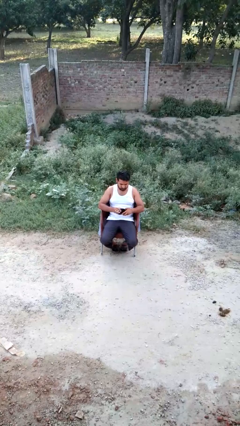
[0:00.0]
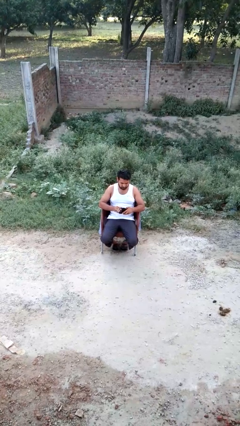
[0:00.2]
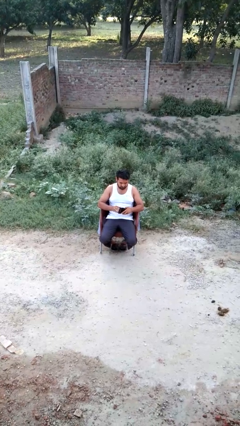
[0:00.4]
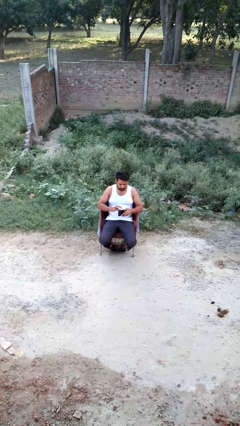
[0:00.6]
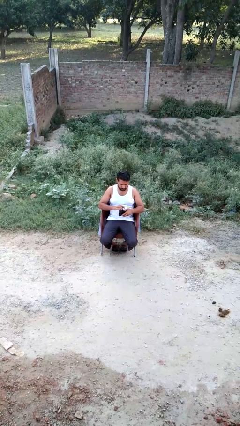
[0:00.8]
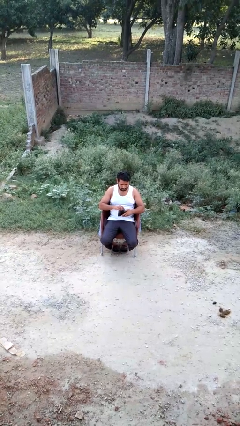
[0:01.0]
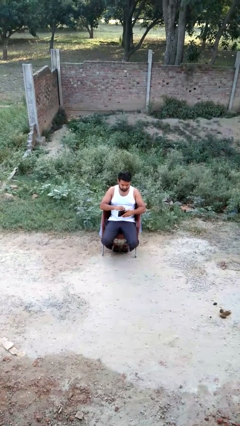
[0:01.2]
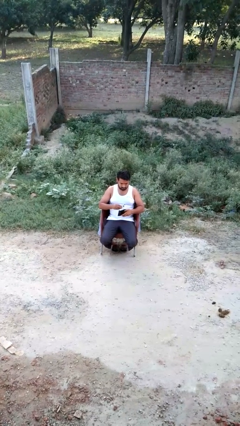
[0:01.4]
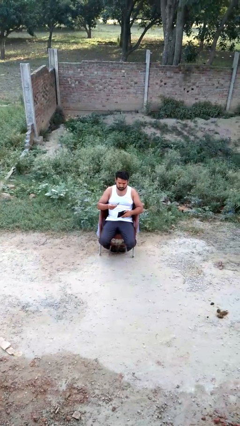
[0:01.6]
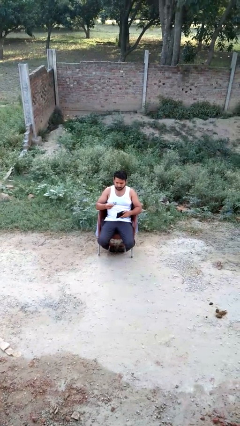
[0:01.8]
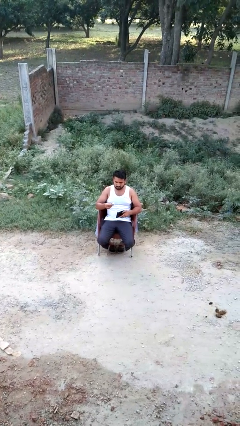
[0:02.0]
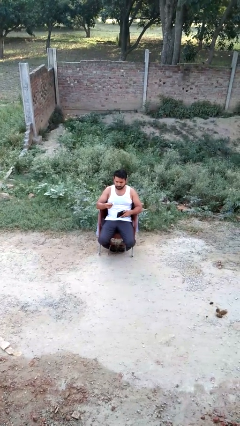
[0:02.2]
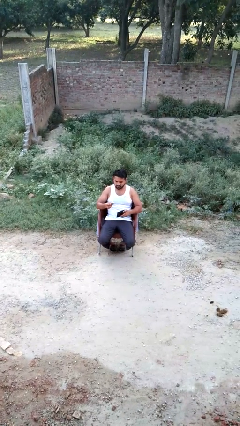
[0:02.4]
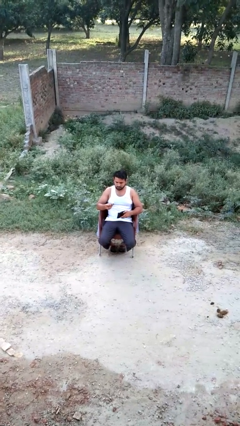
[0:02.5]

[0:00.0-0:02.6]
person takes object from purse

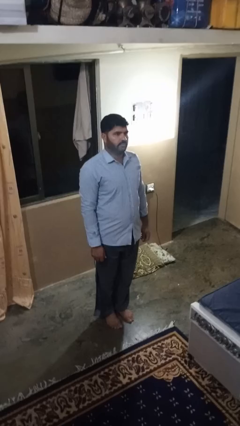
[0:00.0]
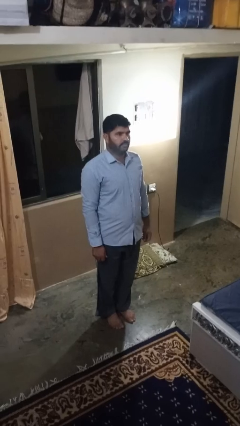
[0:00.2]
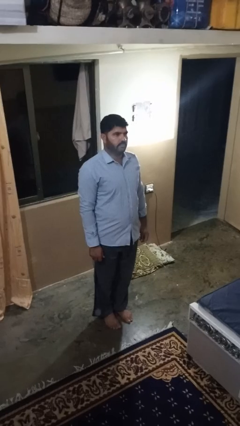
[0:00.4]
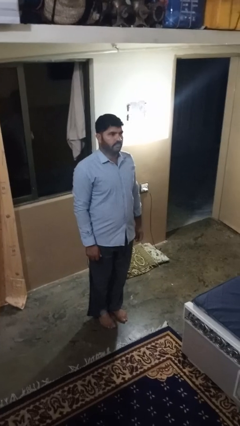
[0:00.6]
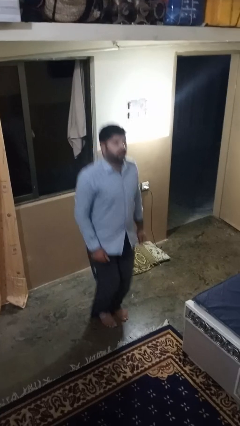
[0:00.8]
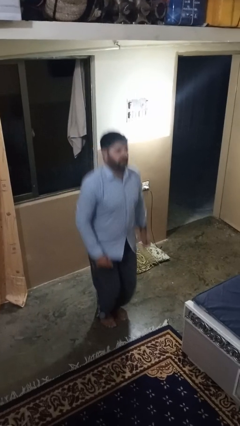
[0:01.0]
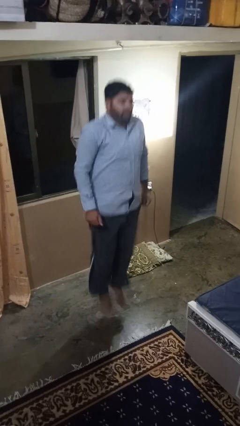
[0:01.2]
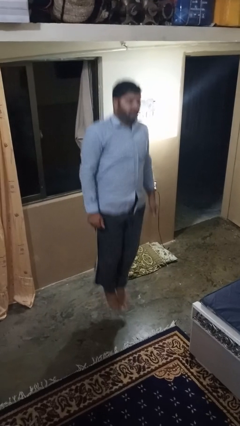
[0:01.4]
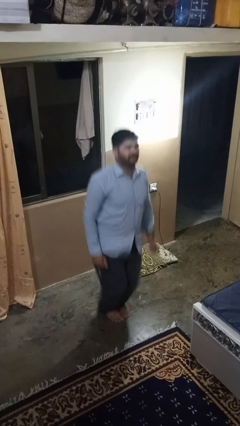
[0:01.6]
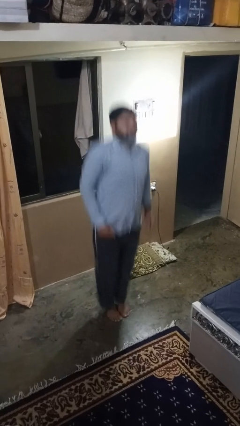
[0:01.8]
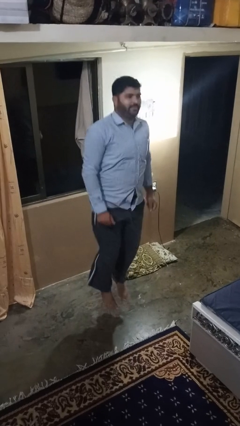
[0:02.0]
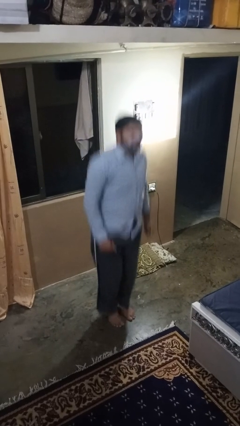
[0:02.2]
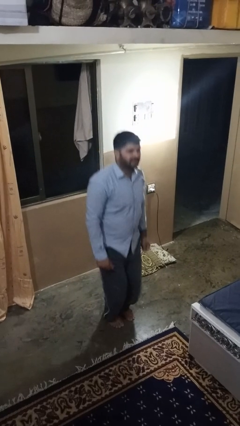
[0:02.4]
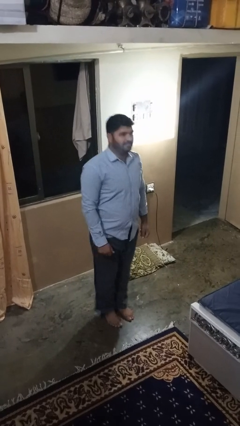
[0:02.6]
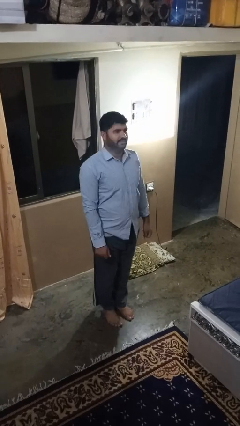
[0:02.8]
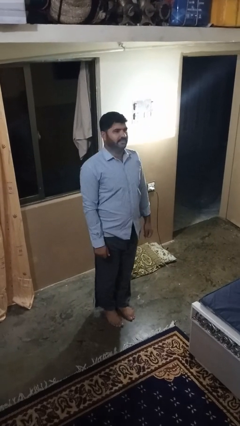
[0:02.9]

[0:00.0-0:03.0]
person jumps

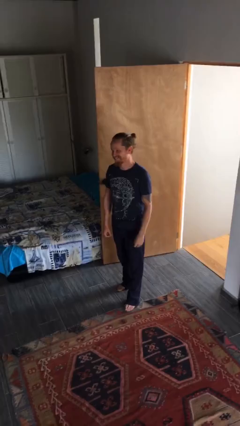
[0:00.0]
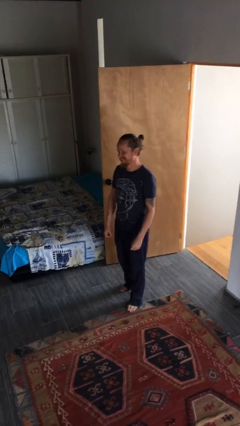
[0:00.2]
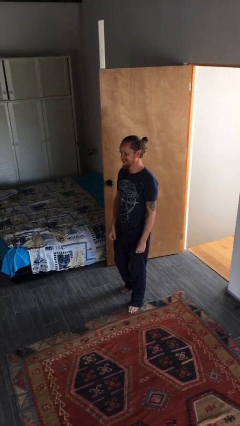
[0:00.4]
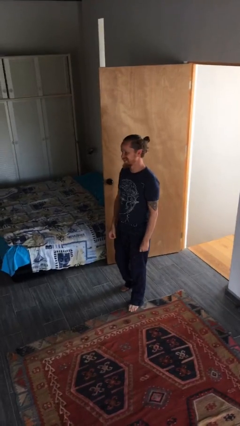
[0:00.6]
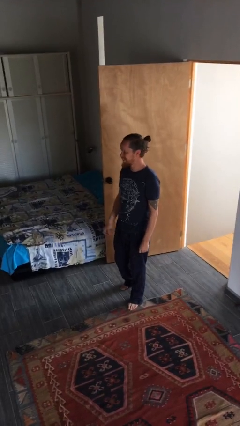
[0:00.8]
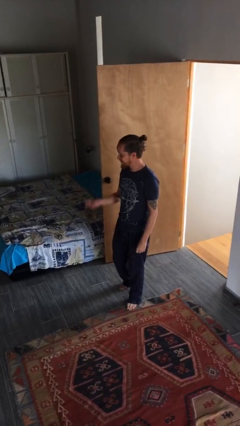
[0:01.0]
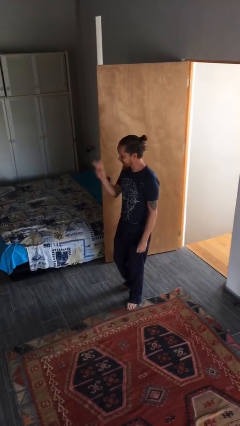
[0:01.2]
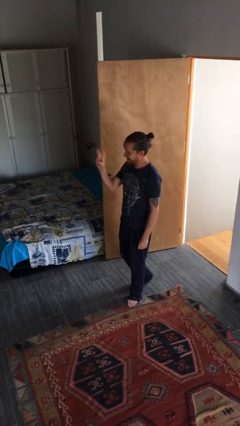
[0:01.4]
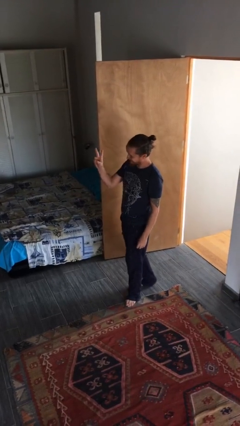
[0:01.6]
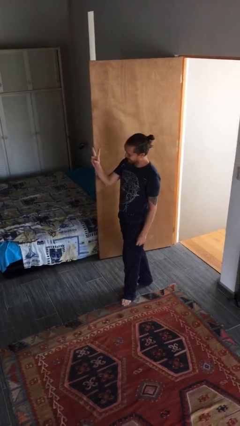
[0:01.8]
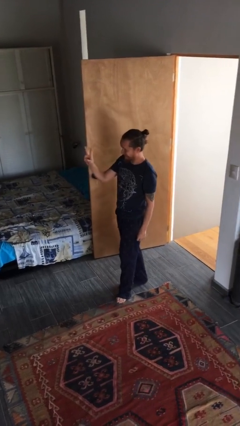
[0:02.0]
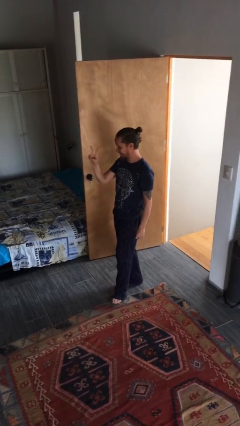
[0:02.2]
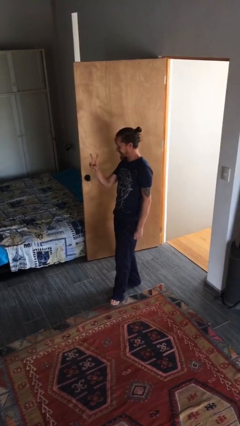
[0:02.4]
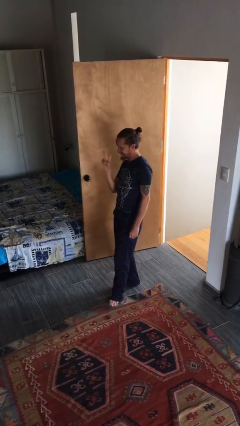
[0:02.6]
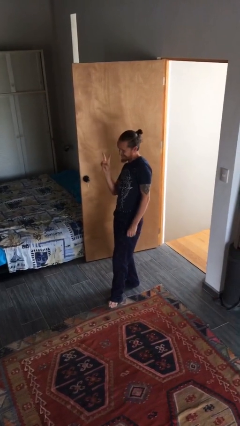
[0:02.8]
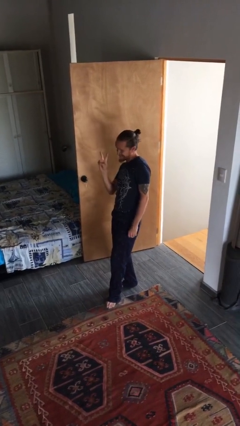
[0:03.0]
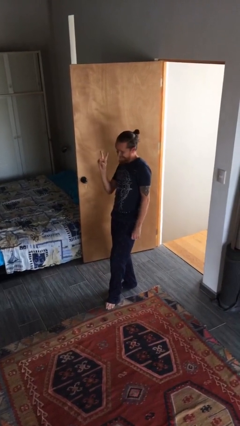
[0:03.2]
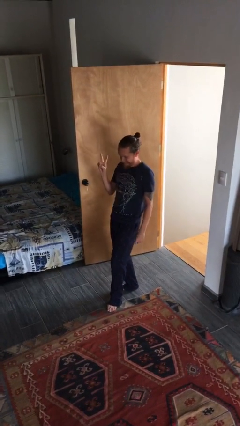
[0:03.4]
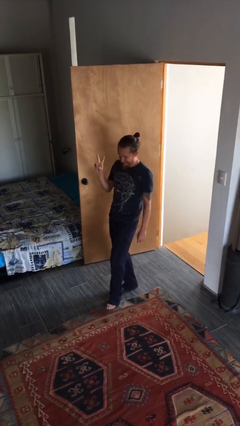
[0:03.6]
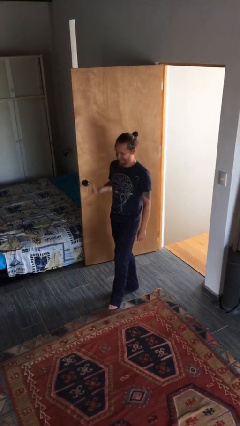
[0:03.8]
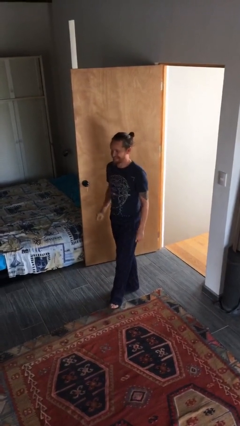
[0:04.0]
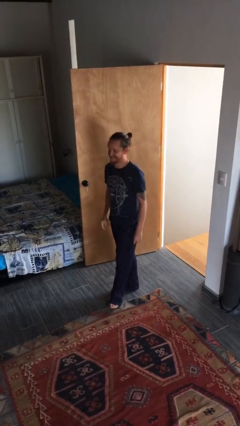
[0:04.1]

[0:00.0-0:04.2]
person gestures peace

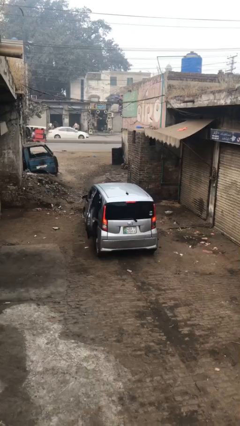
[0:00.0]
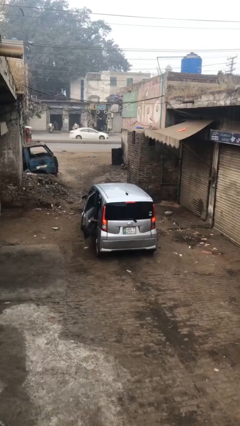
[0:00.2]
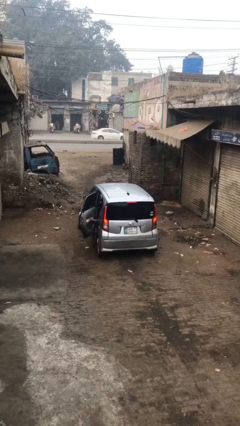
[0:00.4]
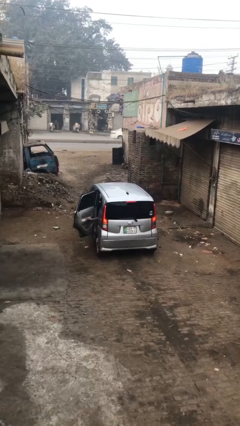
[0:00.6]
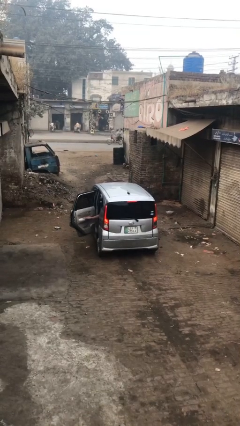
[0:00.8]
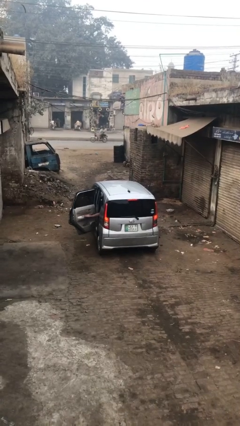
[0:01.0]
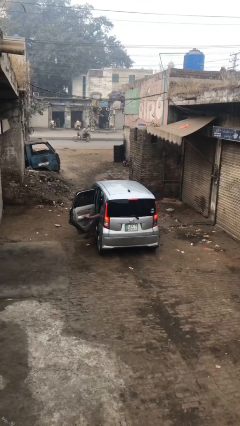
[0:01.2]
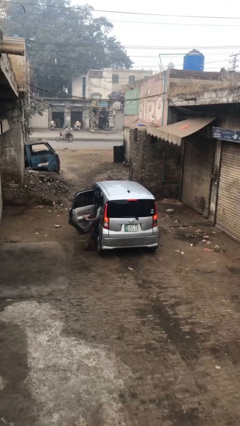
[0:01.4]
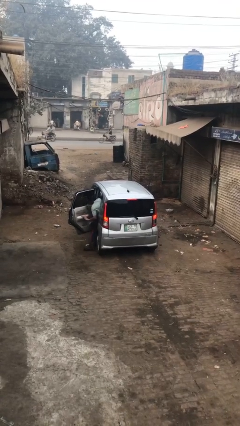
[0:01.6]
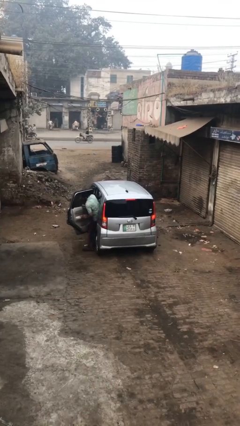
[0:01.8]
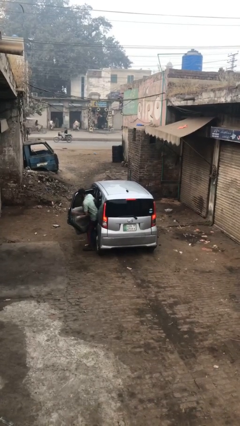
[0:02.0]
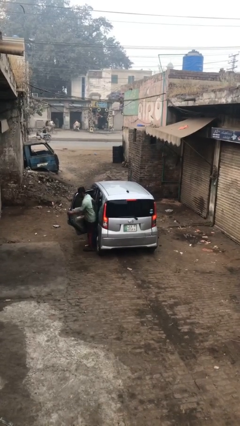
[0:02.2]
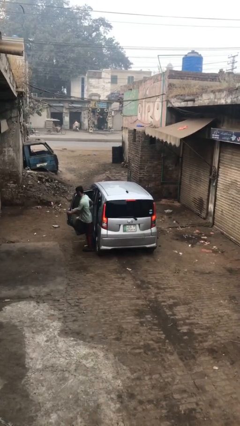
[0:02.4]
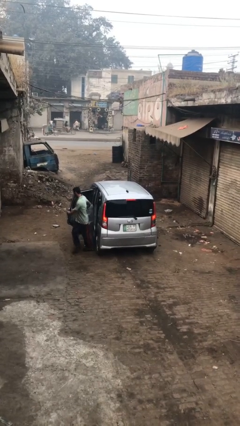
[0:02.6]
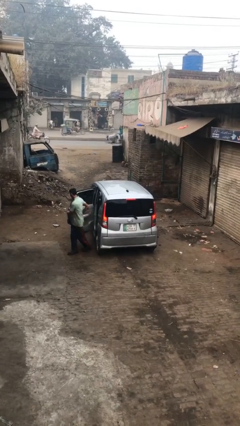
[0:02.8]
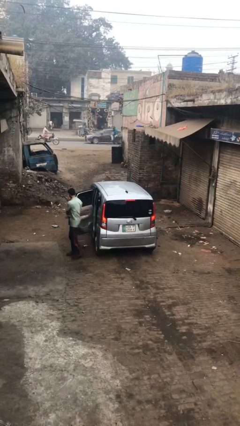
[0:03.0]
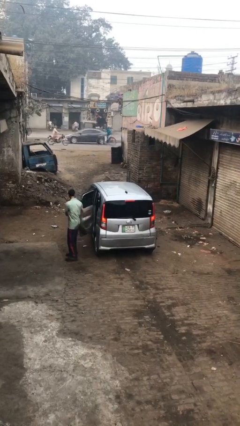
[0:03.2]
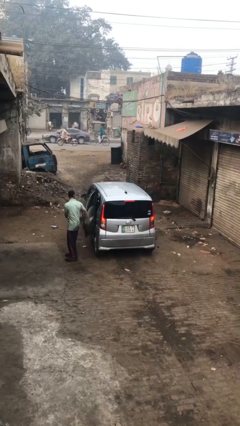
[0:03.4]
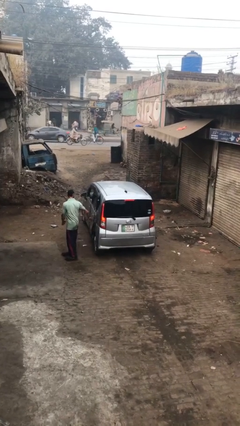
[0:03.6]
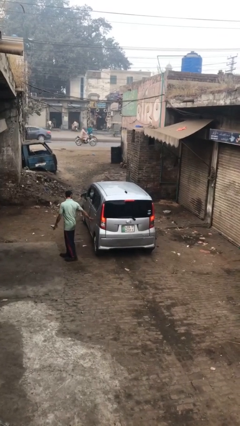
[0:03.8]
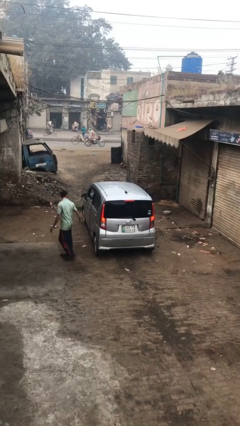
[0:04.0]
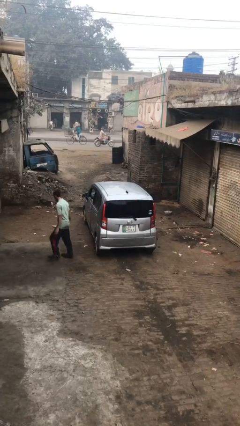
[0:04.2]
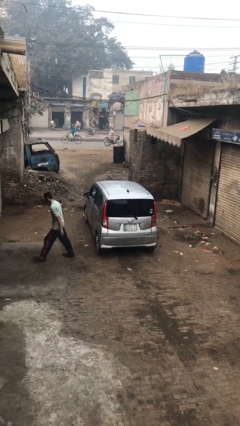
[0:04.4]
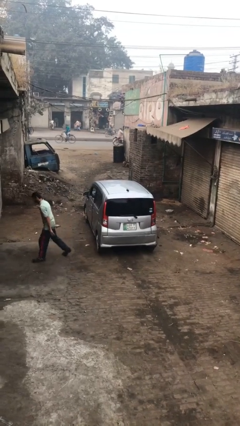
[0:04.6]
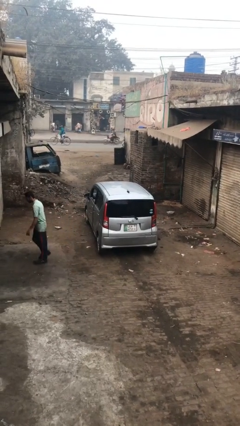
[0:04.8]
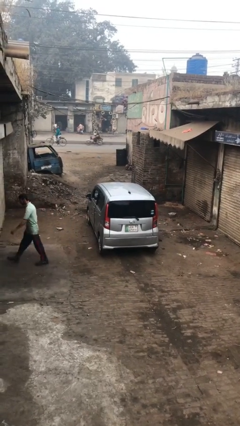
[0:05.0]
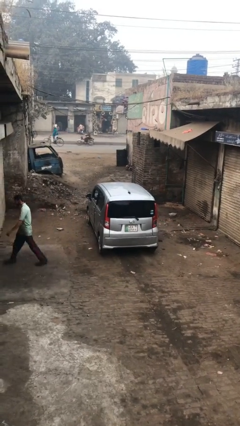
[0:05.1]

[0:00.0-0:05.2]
car drops off person

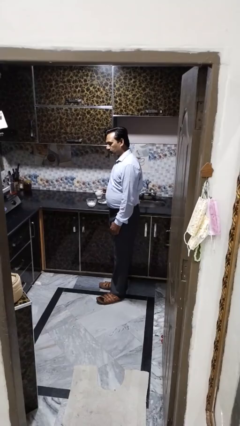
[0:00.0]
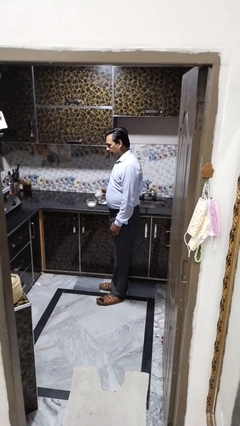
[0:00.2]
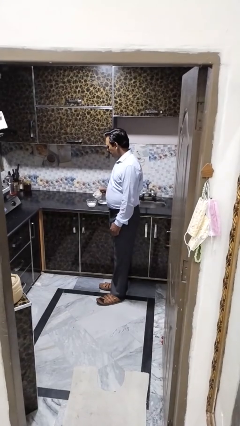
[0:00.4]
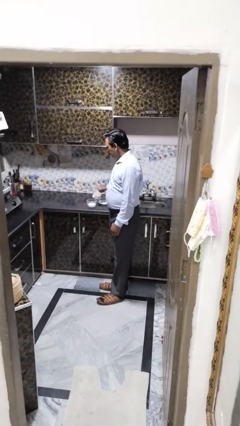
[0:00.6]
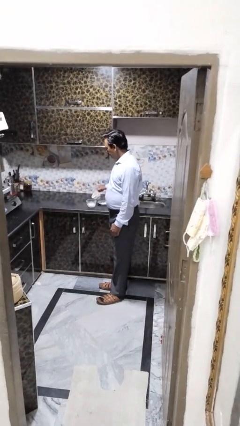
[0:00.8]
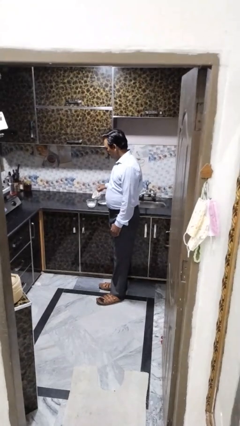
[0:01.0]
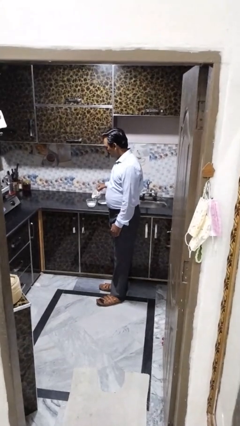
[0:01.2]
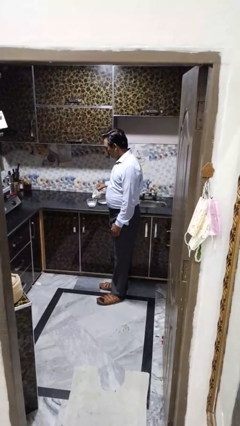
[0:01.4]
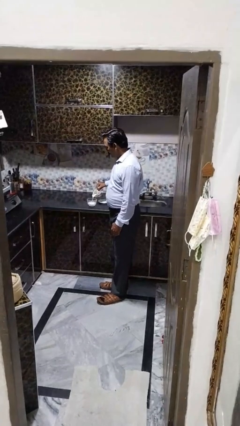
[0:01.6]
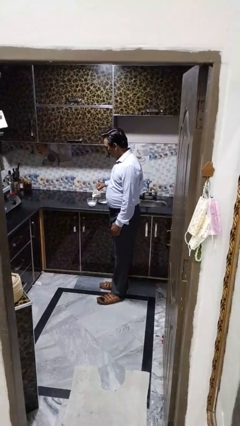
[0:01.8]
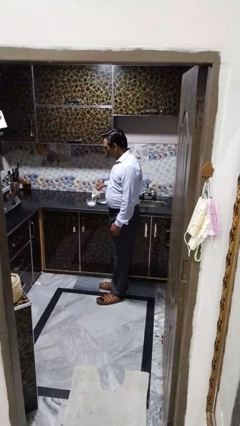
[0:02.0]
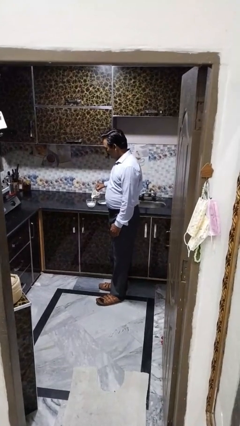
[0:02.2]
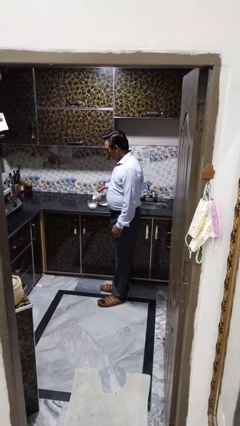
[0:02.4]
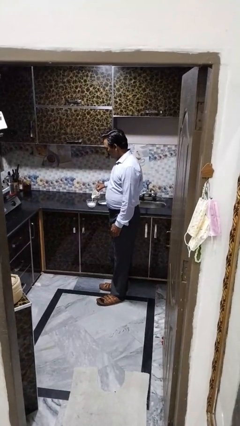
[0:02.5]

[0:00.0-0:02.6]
person pours into bowl
